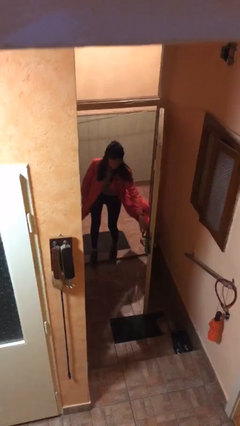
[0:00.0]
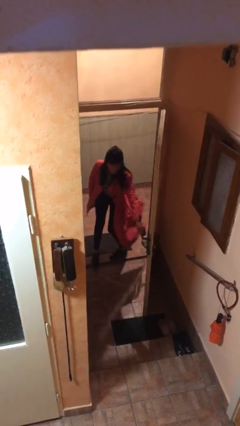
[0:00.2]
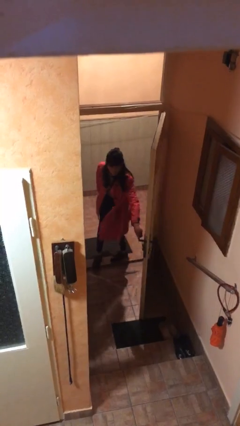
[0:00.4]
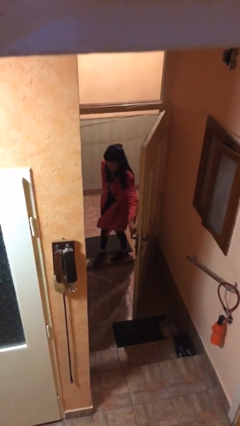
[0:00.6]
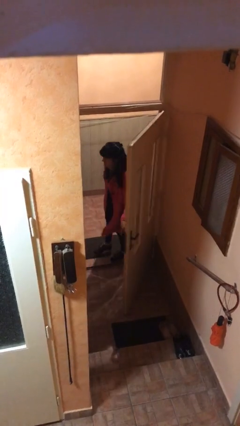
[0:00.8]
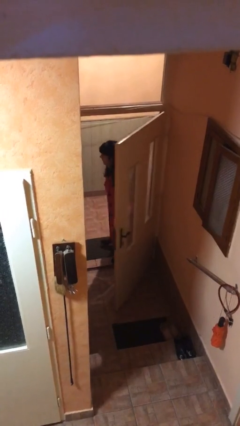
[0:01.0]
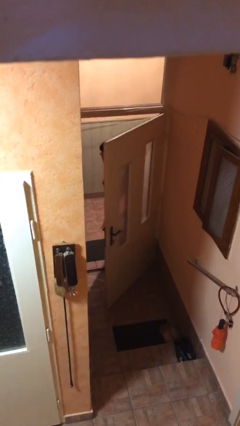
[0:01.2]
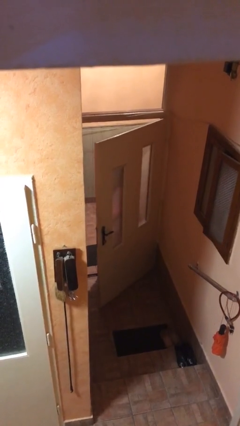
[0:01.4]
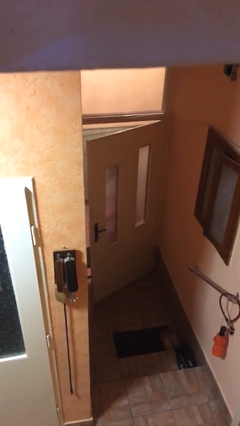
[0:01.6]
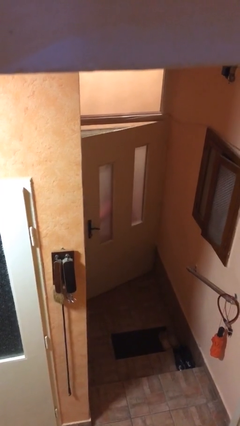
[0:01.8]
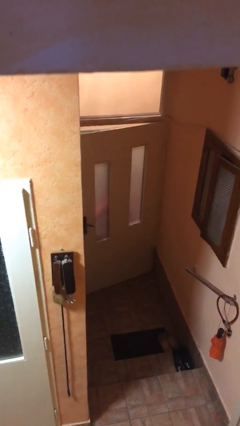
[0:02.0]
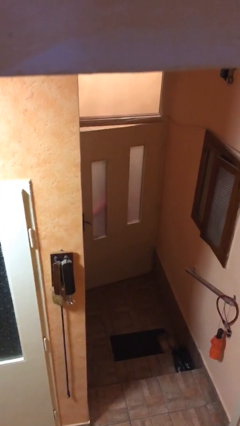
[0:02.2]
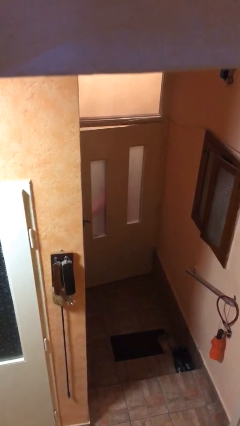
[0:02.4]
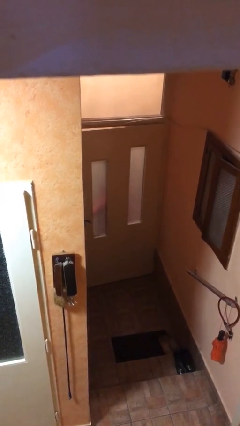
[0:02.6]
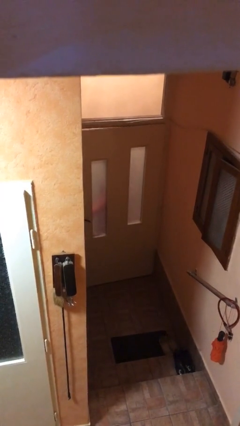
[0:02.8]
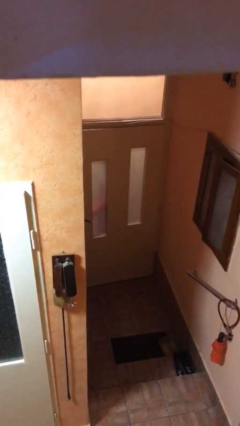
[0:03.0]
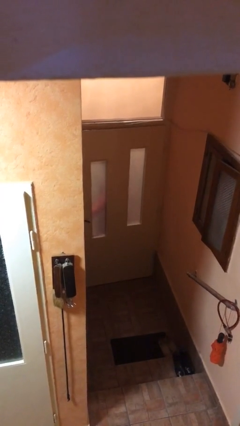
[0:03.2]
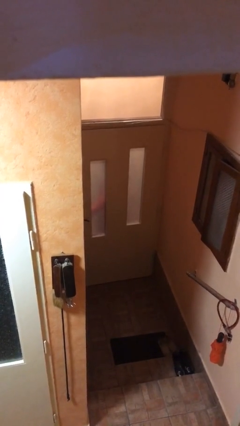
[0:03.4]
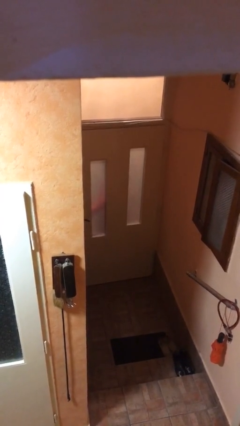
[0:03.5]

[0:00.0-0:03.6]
person closes facility door

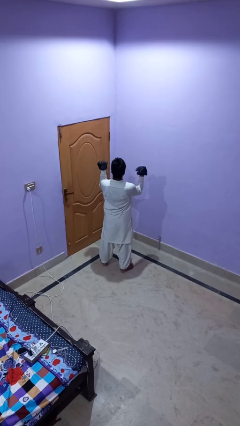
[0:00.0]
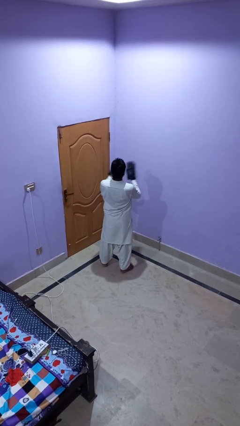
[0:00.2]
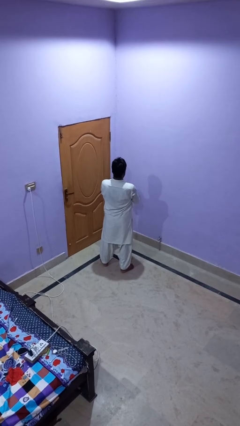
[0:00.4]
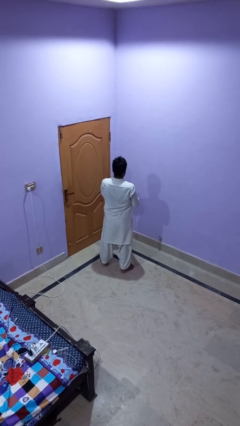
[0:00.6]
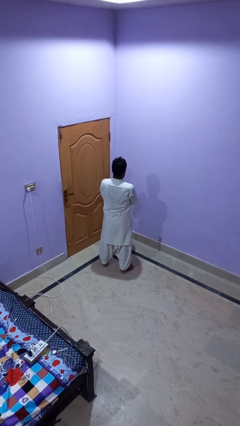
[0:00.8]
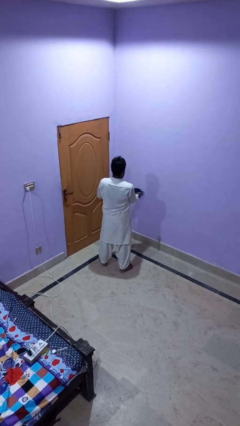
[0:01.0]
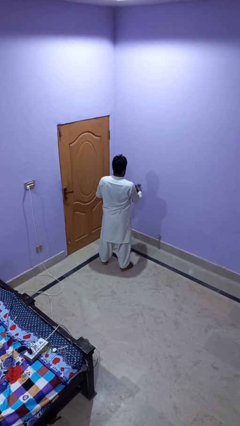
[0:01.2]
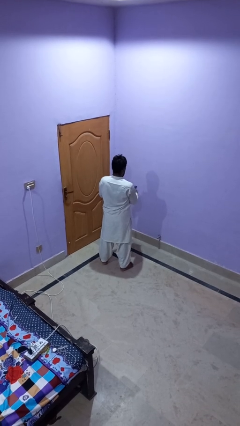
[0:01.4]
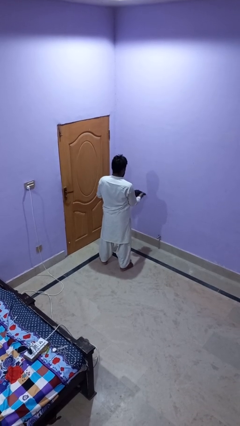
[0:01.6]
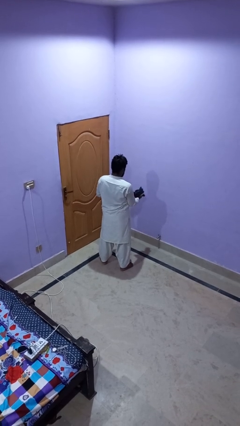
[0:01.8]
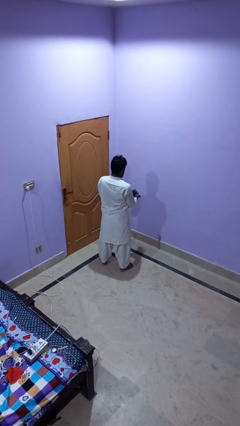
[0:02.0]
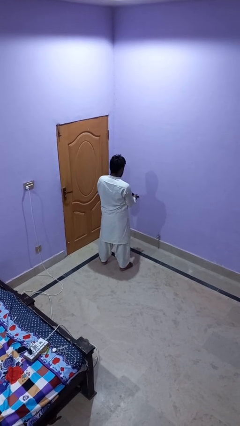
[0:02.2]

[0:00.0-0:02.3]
person takes off gloves

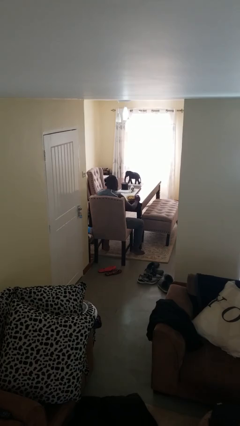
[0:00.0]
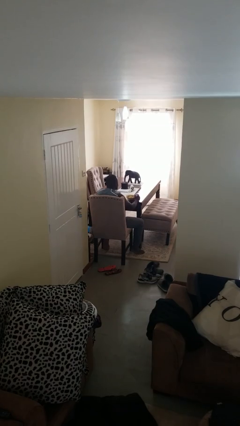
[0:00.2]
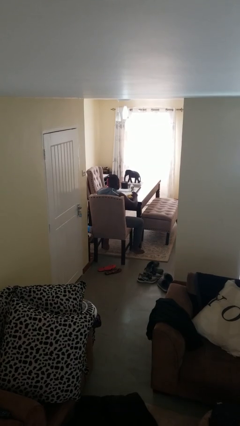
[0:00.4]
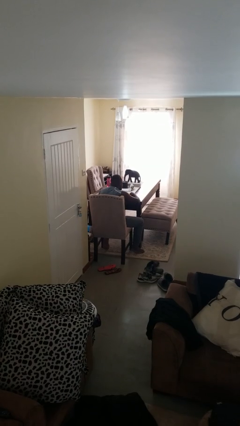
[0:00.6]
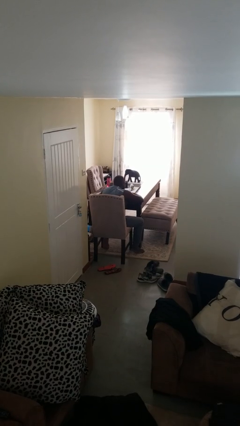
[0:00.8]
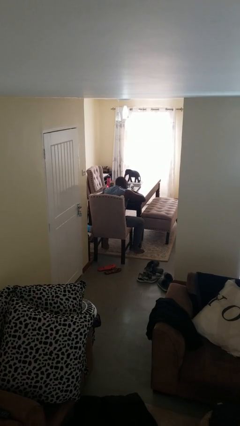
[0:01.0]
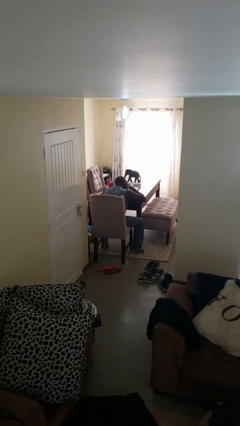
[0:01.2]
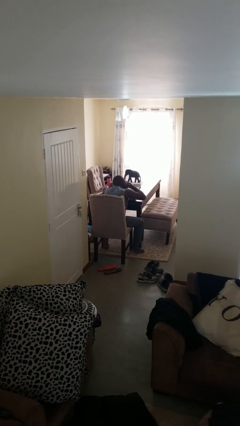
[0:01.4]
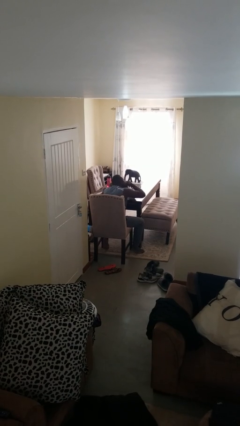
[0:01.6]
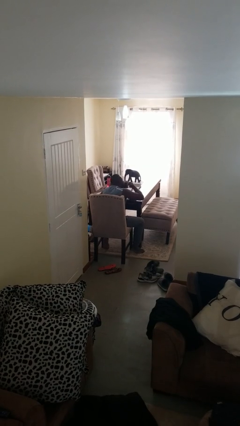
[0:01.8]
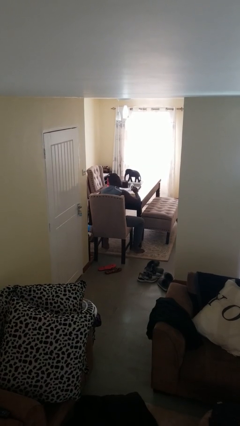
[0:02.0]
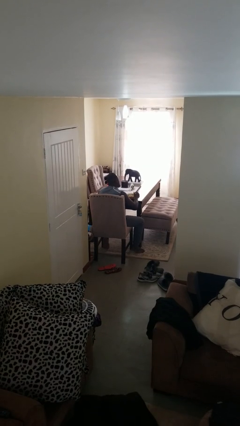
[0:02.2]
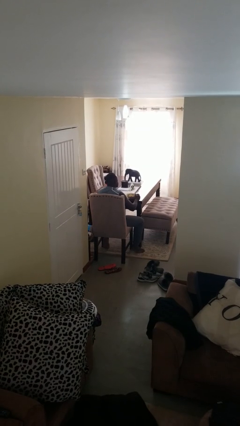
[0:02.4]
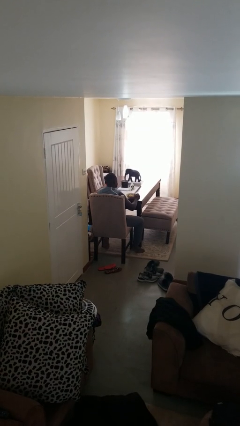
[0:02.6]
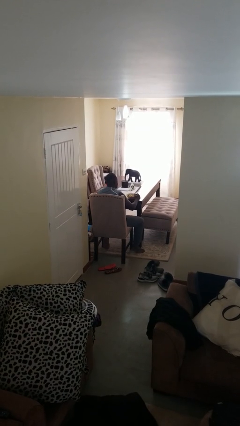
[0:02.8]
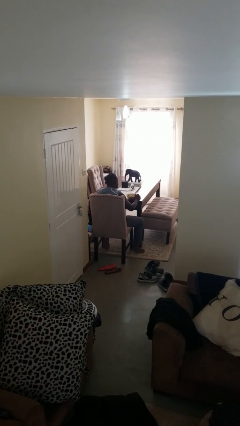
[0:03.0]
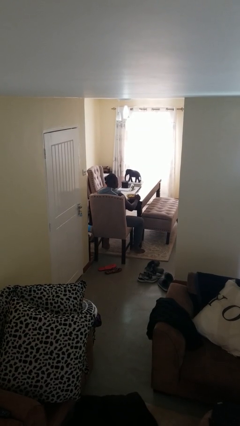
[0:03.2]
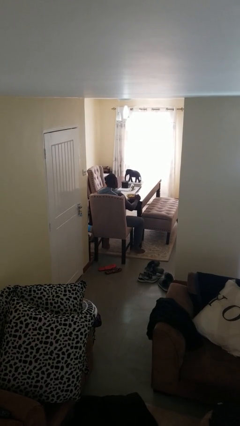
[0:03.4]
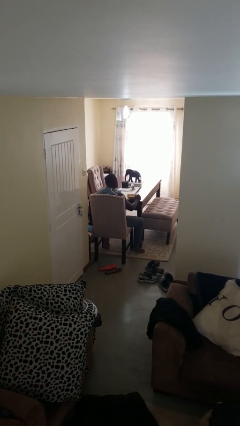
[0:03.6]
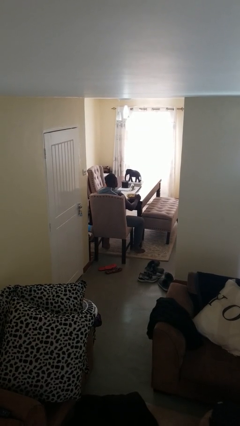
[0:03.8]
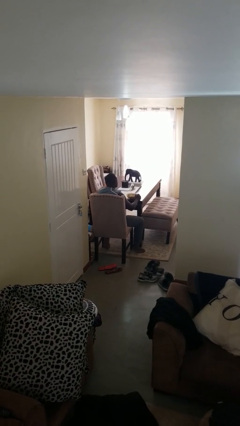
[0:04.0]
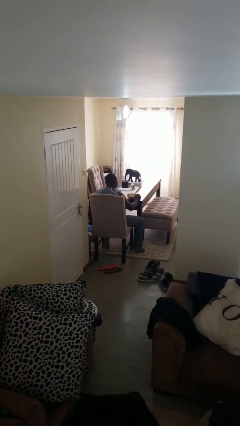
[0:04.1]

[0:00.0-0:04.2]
person eats with hands

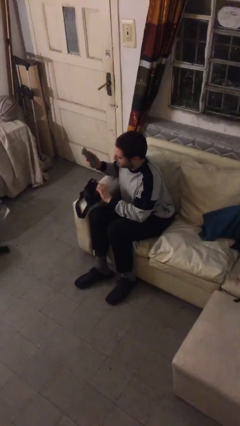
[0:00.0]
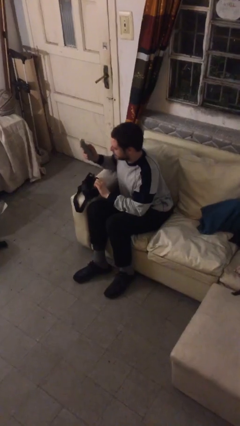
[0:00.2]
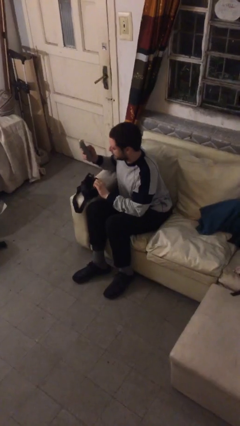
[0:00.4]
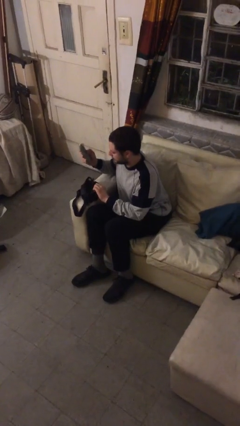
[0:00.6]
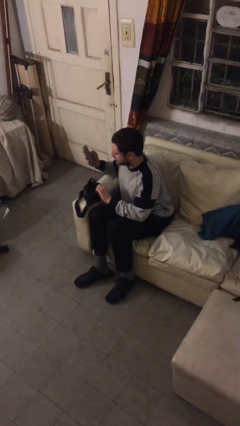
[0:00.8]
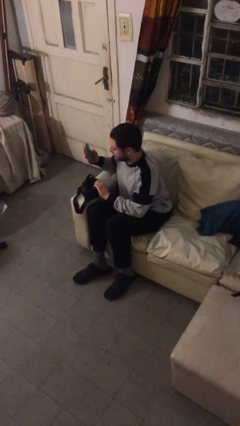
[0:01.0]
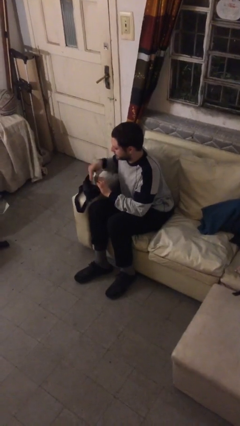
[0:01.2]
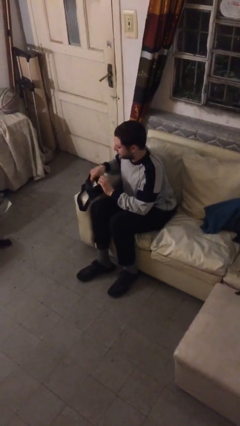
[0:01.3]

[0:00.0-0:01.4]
person takes object from purse

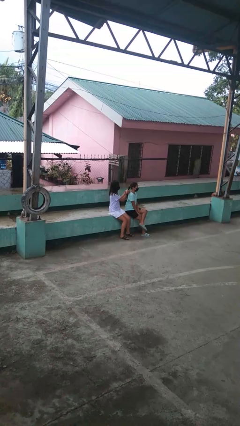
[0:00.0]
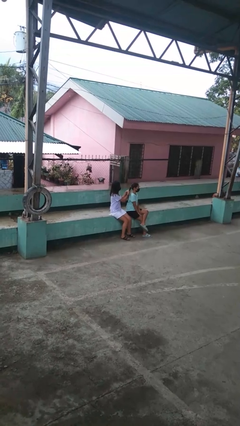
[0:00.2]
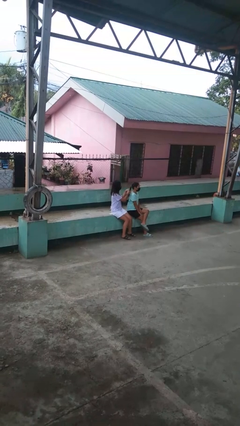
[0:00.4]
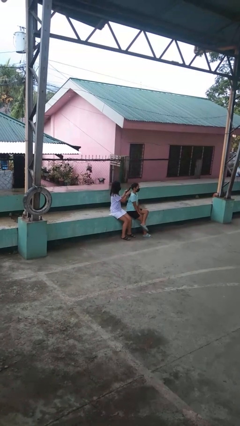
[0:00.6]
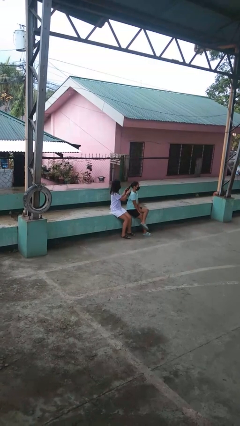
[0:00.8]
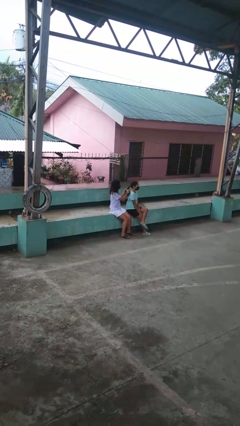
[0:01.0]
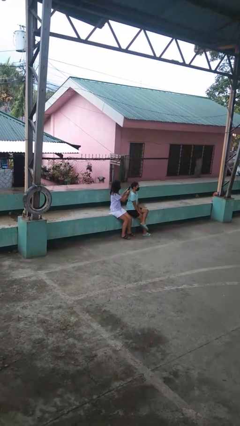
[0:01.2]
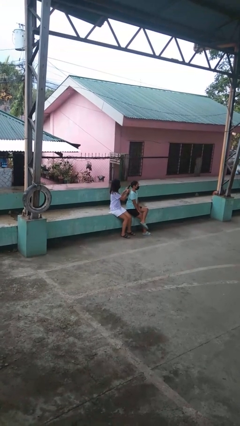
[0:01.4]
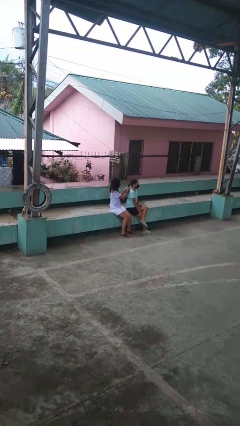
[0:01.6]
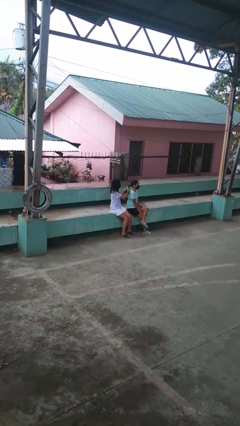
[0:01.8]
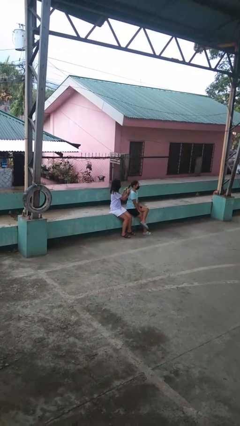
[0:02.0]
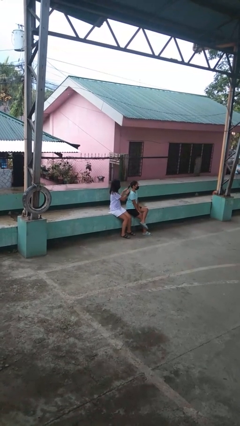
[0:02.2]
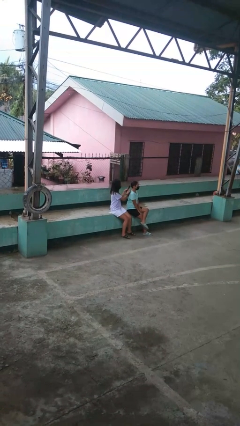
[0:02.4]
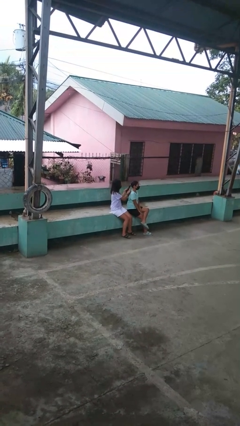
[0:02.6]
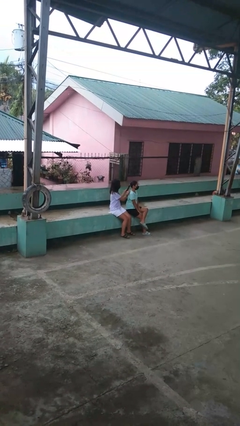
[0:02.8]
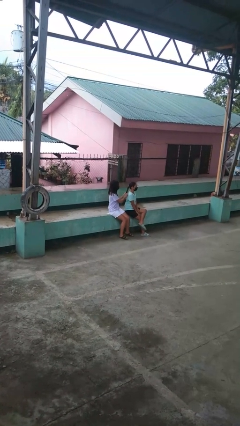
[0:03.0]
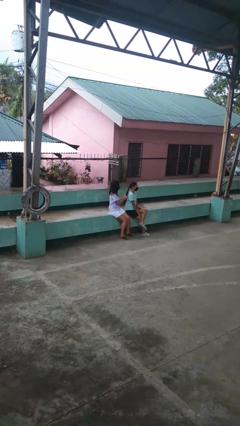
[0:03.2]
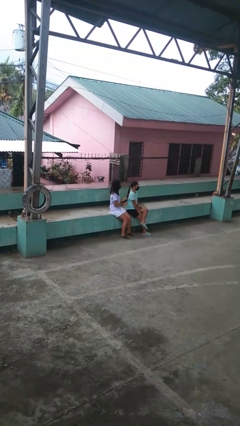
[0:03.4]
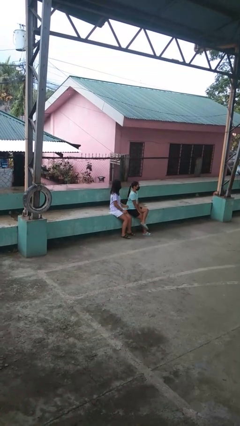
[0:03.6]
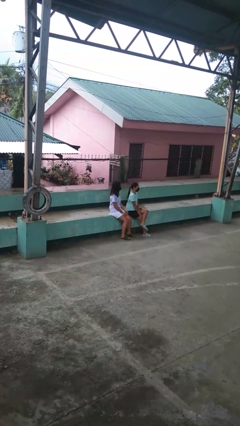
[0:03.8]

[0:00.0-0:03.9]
person braids hair of person

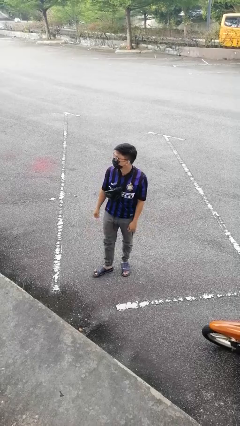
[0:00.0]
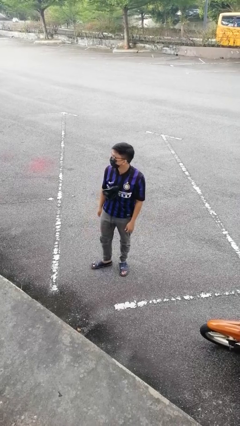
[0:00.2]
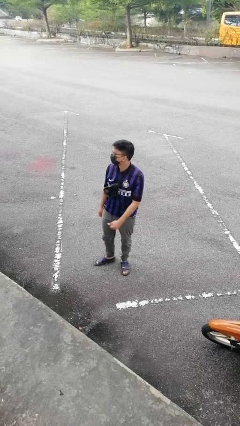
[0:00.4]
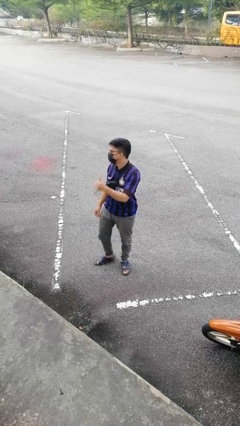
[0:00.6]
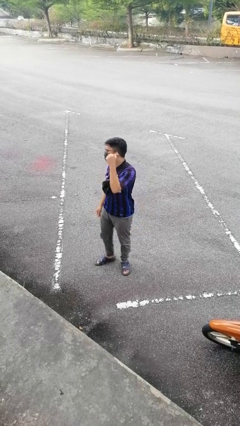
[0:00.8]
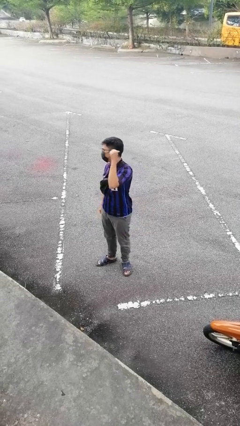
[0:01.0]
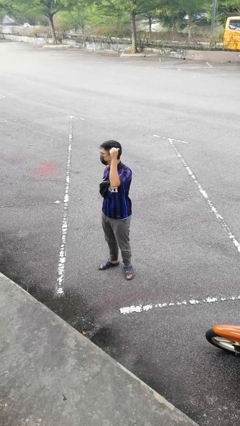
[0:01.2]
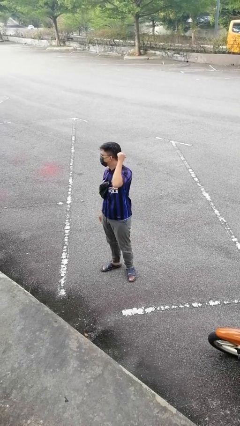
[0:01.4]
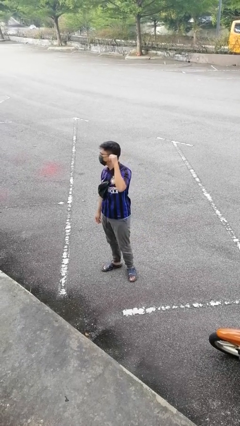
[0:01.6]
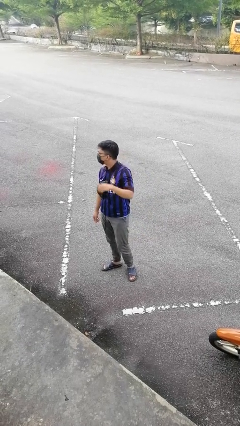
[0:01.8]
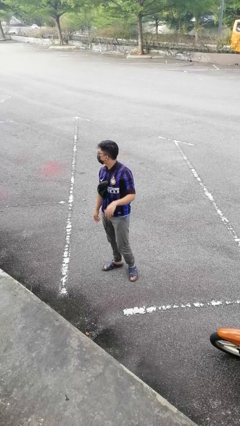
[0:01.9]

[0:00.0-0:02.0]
person gestures behind me
